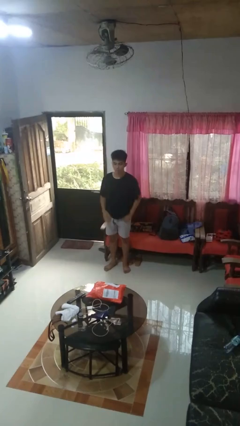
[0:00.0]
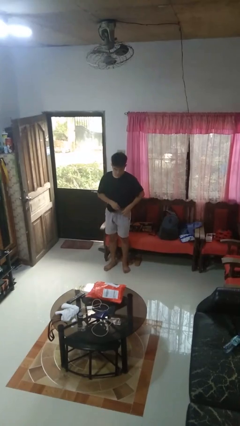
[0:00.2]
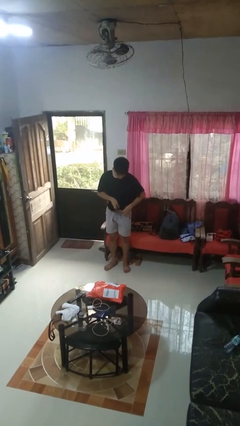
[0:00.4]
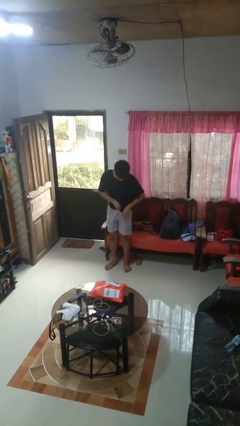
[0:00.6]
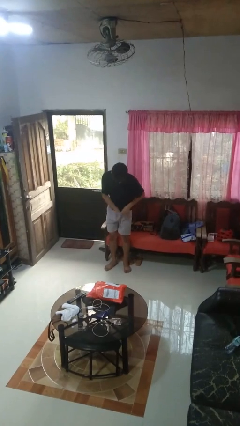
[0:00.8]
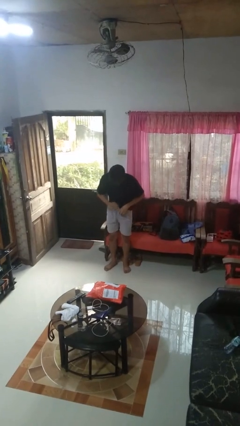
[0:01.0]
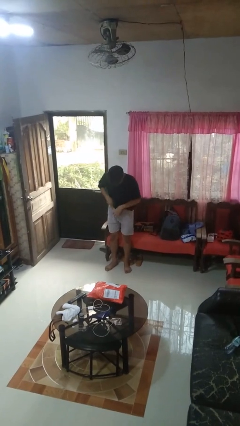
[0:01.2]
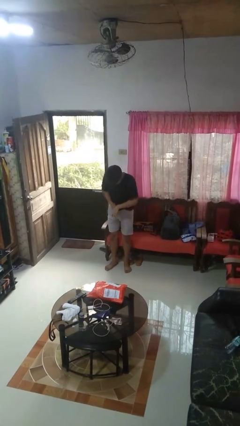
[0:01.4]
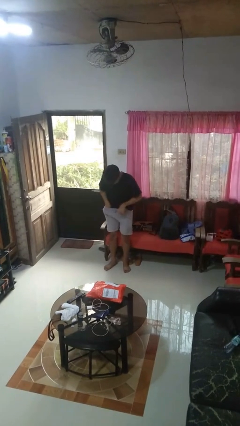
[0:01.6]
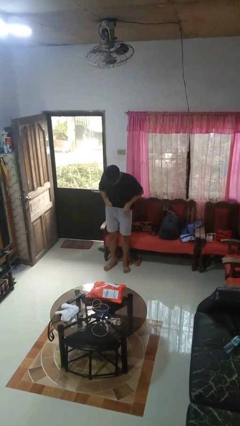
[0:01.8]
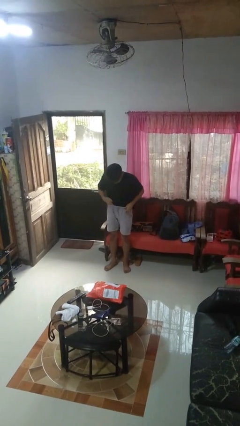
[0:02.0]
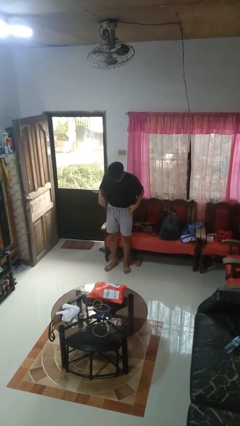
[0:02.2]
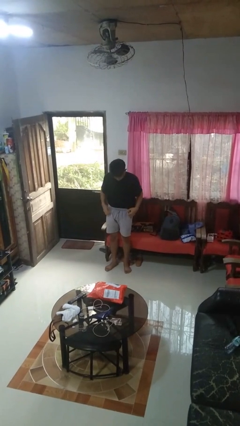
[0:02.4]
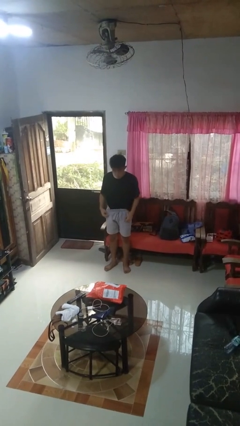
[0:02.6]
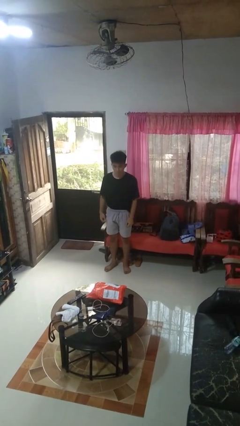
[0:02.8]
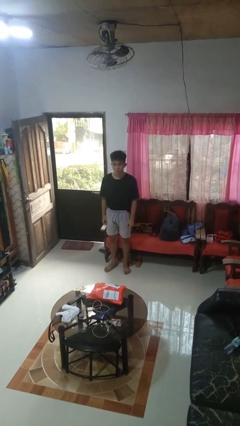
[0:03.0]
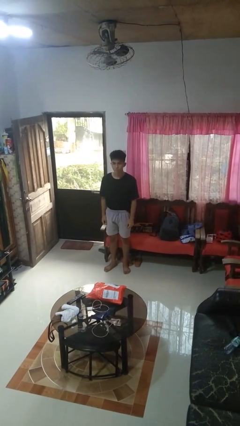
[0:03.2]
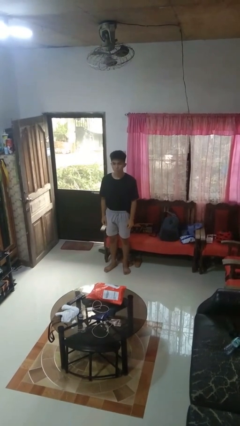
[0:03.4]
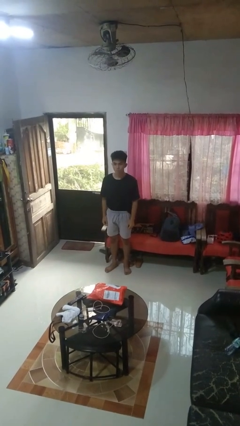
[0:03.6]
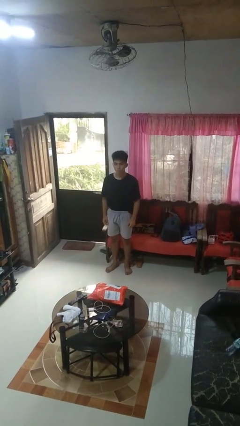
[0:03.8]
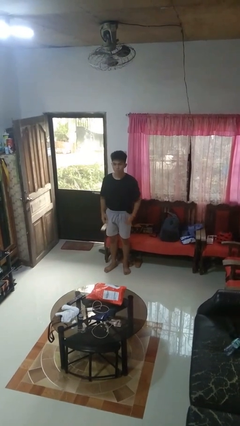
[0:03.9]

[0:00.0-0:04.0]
person tucks in shirt

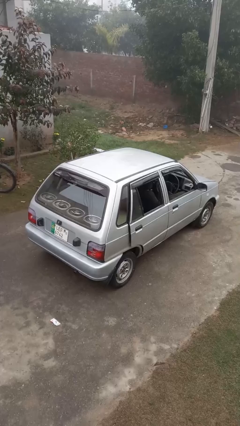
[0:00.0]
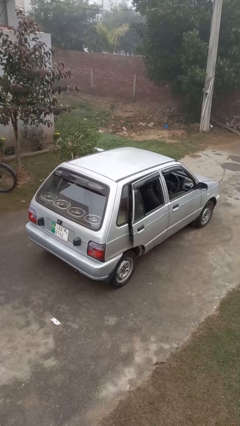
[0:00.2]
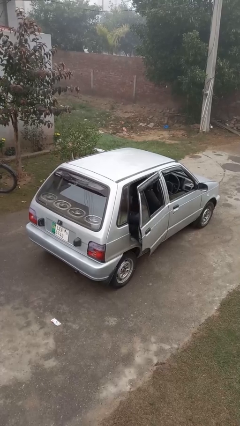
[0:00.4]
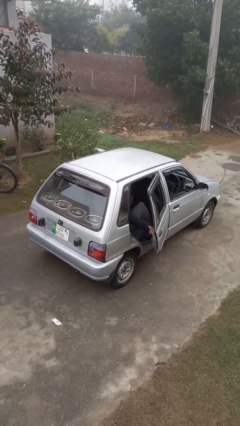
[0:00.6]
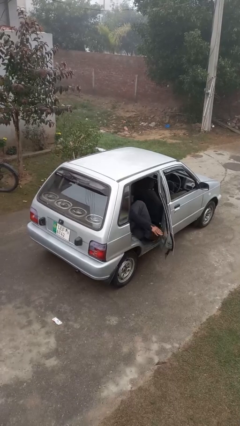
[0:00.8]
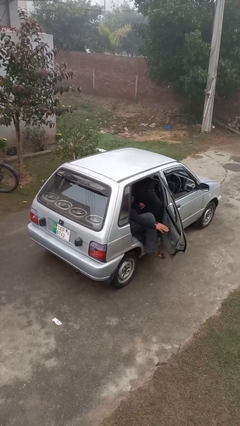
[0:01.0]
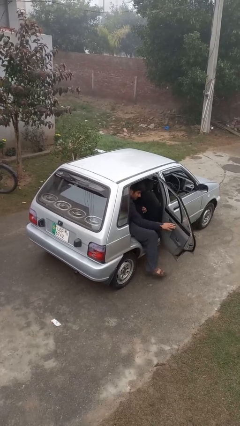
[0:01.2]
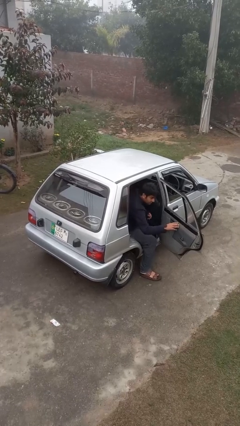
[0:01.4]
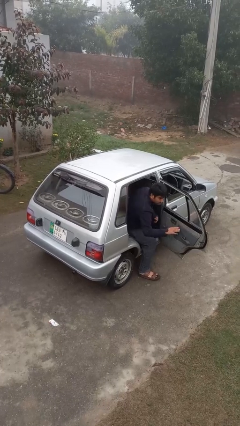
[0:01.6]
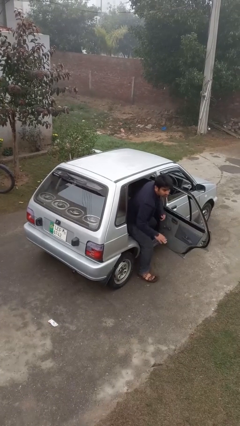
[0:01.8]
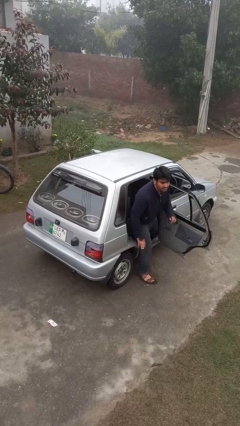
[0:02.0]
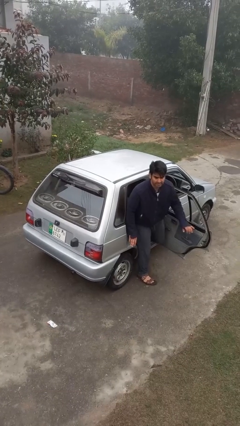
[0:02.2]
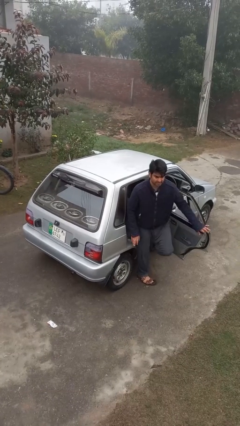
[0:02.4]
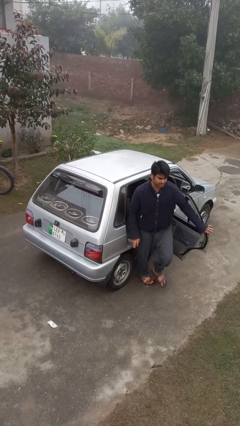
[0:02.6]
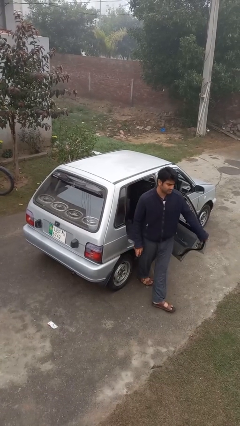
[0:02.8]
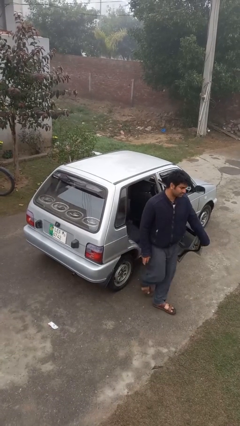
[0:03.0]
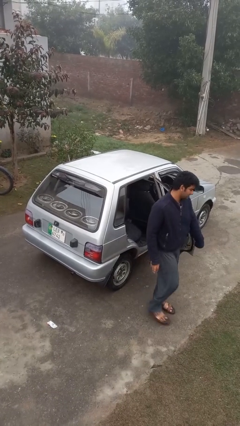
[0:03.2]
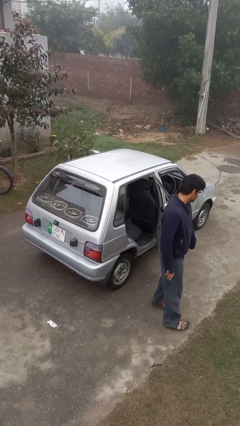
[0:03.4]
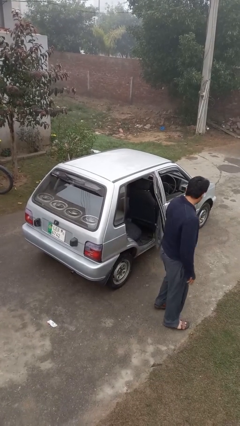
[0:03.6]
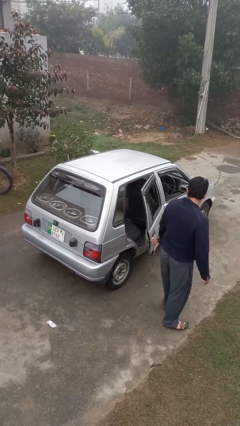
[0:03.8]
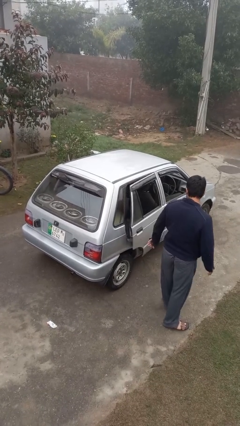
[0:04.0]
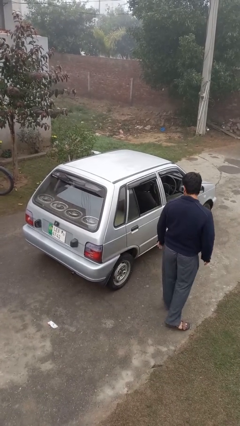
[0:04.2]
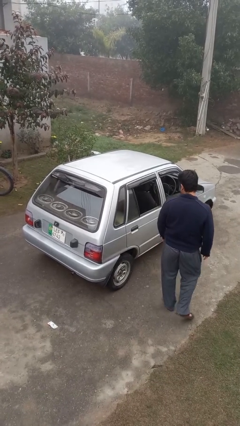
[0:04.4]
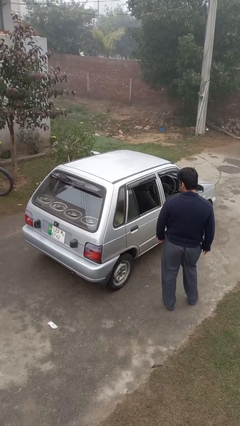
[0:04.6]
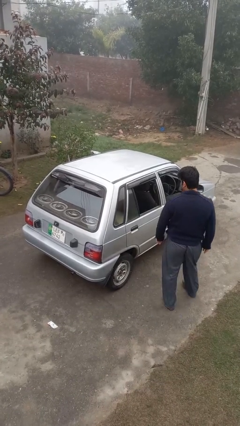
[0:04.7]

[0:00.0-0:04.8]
car drops off person

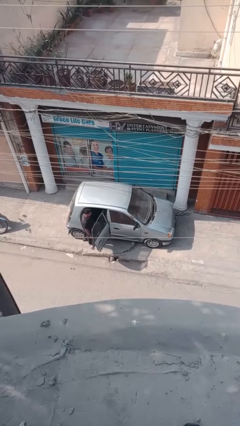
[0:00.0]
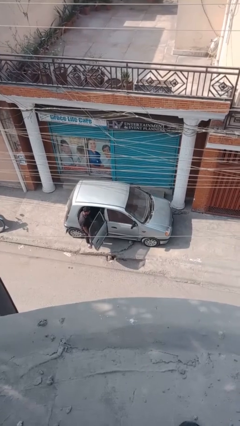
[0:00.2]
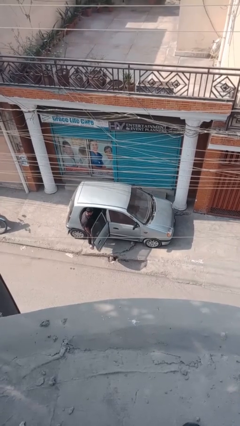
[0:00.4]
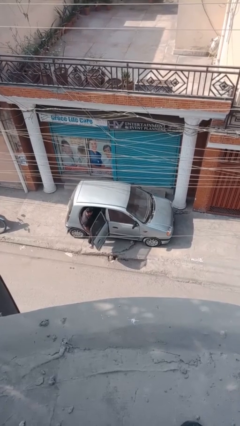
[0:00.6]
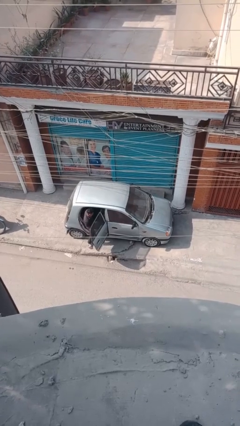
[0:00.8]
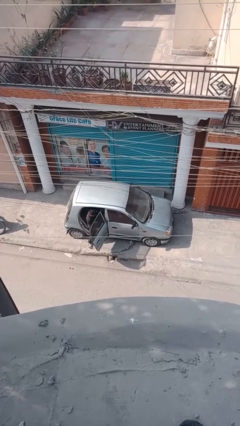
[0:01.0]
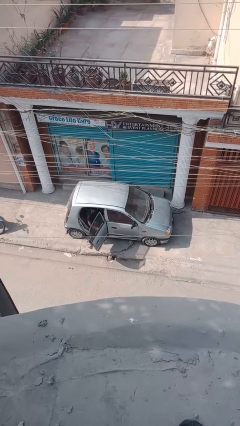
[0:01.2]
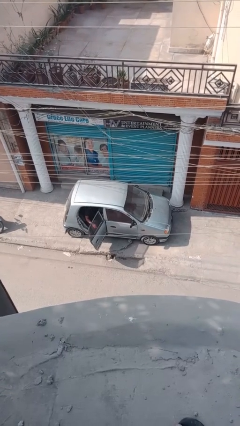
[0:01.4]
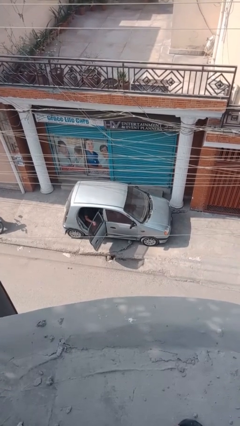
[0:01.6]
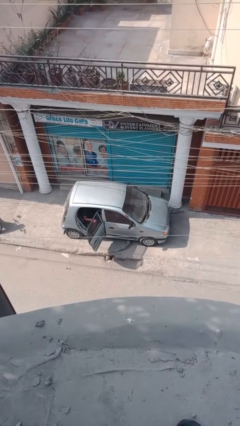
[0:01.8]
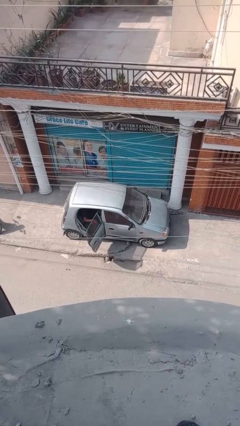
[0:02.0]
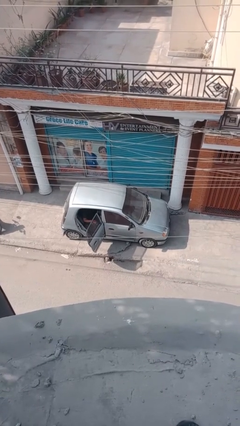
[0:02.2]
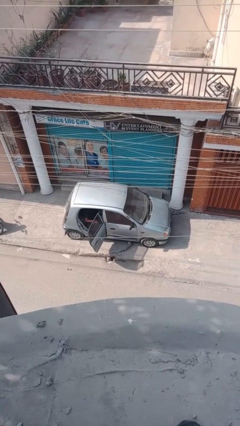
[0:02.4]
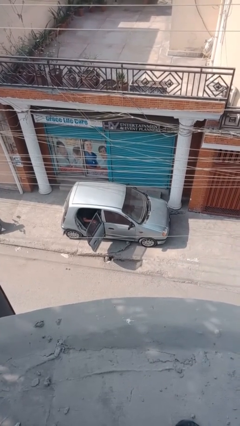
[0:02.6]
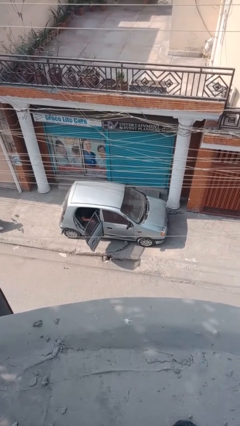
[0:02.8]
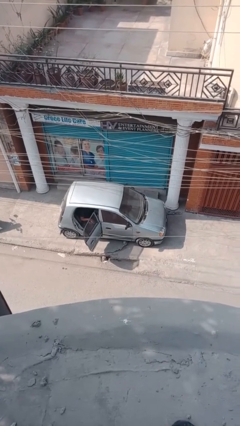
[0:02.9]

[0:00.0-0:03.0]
person enters car

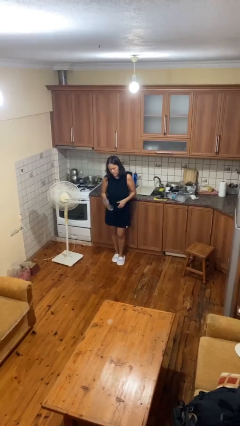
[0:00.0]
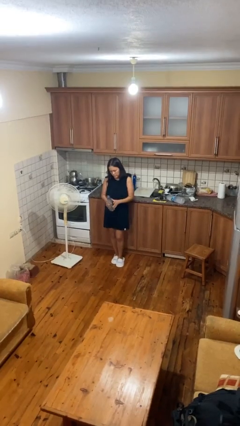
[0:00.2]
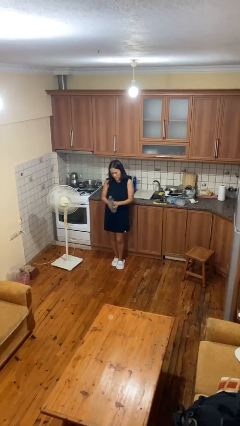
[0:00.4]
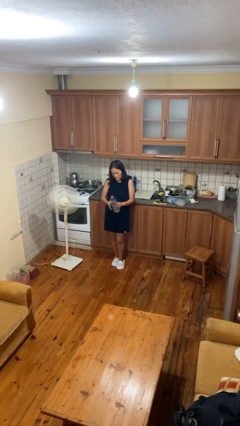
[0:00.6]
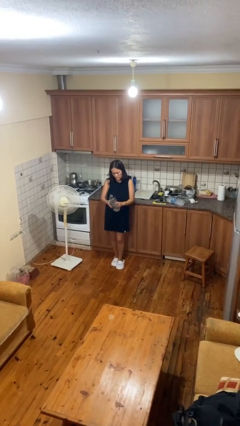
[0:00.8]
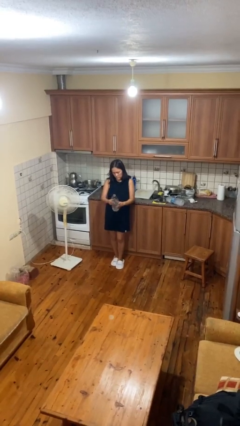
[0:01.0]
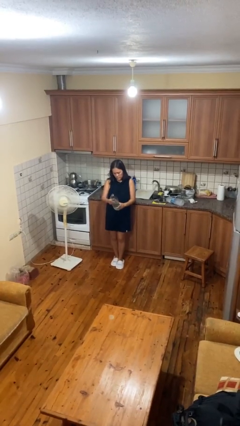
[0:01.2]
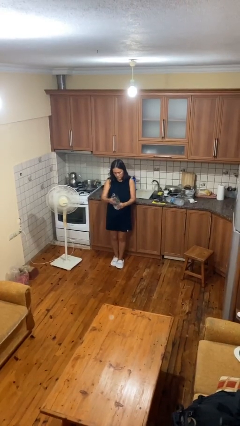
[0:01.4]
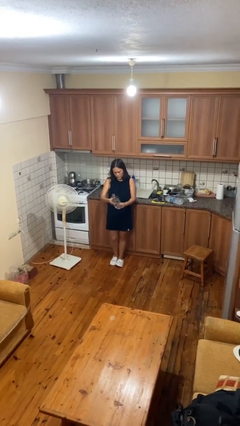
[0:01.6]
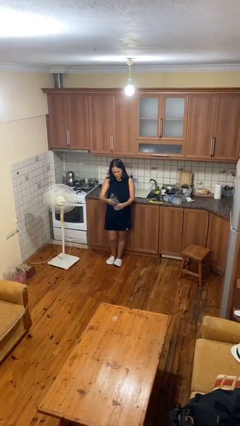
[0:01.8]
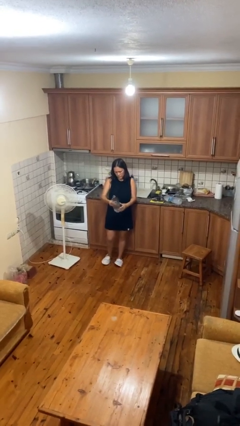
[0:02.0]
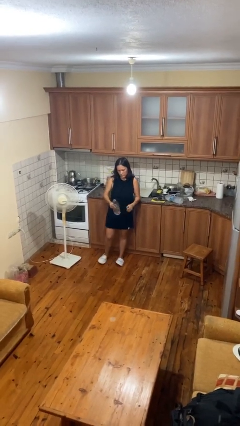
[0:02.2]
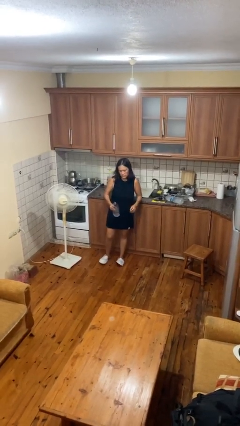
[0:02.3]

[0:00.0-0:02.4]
person squeezes object

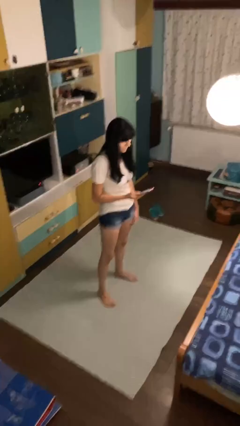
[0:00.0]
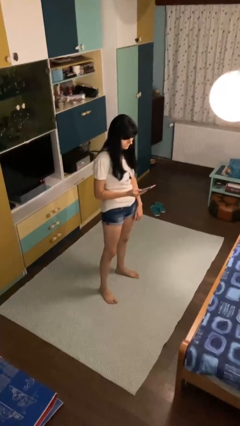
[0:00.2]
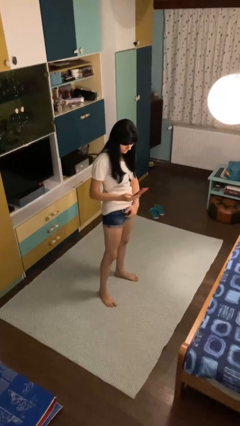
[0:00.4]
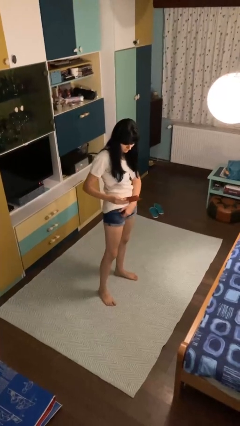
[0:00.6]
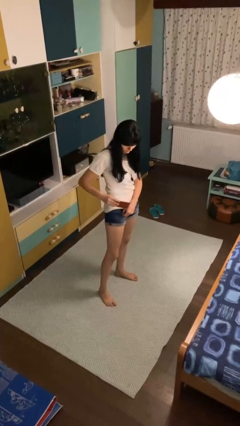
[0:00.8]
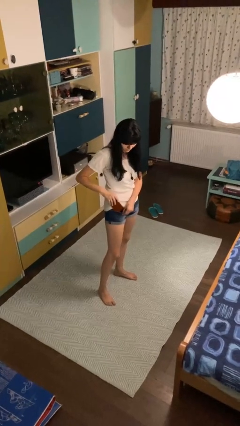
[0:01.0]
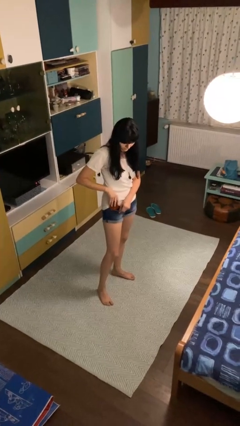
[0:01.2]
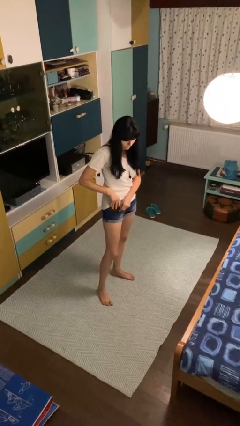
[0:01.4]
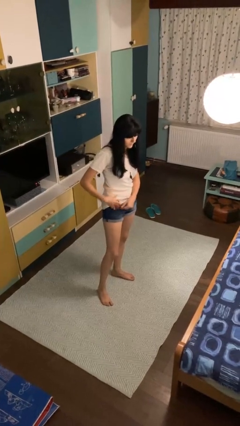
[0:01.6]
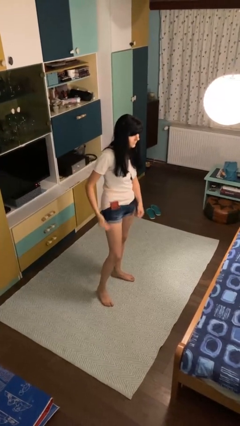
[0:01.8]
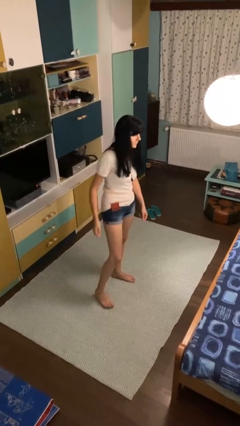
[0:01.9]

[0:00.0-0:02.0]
person puts phone into pocket

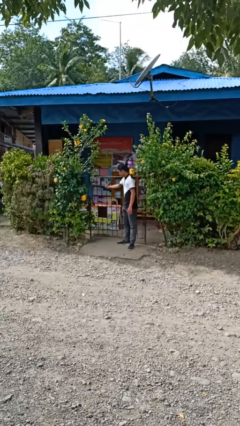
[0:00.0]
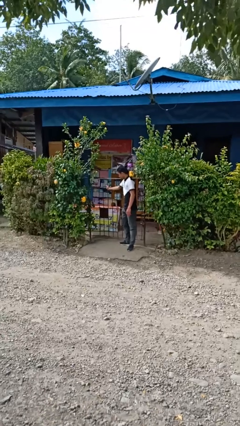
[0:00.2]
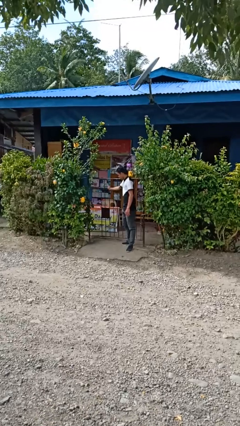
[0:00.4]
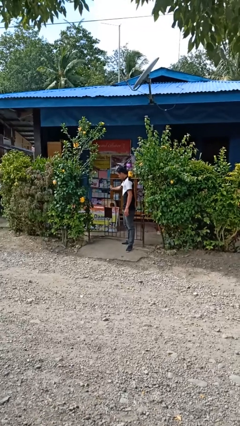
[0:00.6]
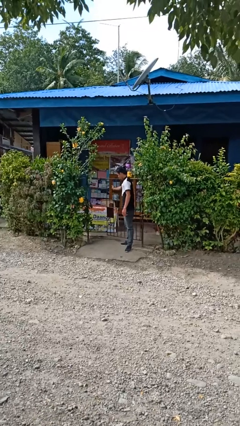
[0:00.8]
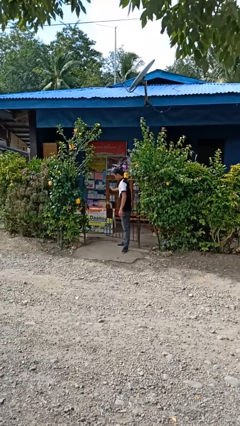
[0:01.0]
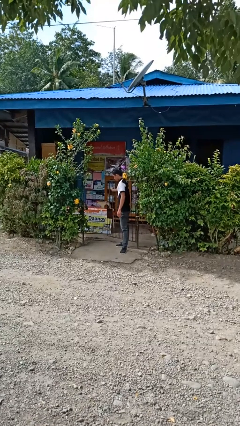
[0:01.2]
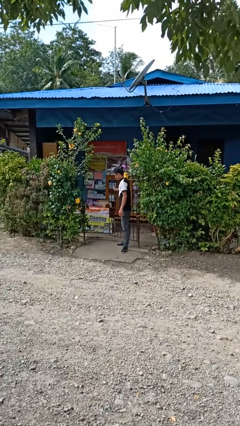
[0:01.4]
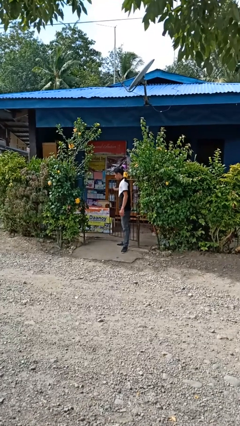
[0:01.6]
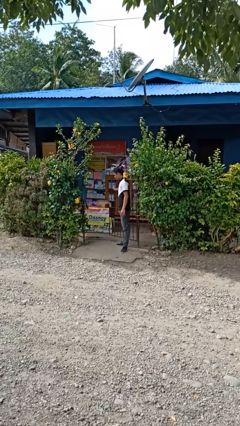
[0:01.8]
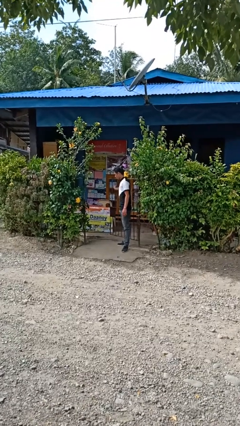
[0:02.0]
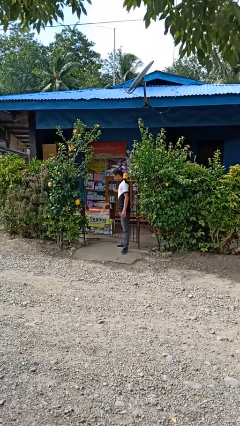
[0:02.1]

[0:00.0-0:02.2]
person opens gate
